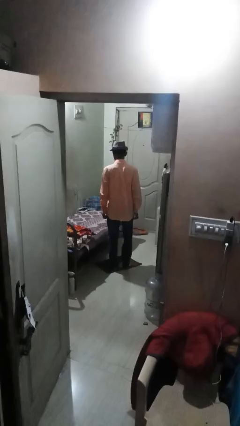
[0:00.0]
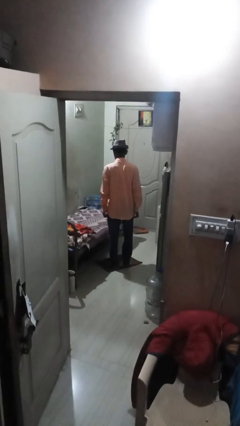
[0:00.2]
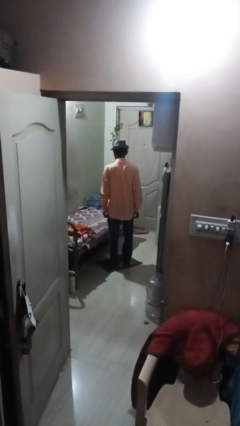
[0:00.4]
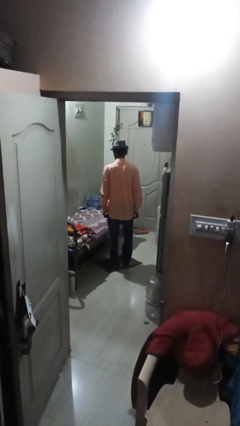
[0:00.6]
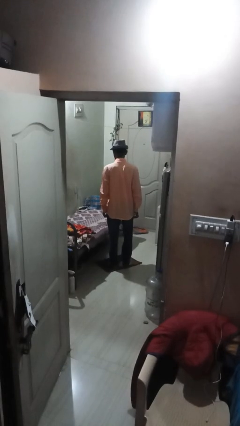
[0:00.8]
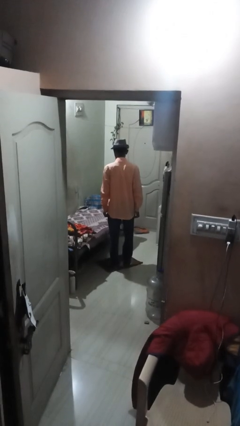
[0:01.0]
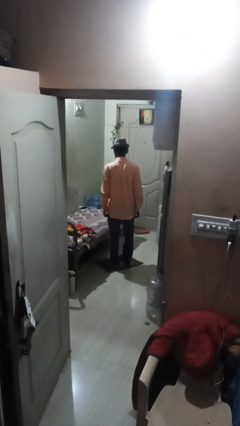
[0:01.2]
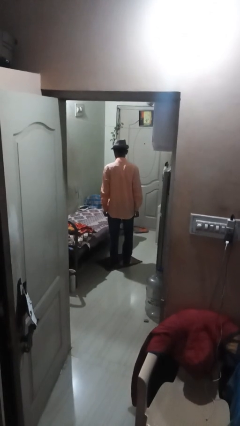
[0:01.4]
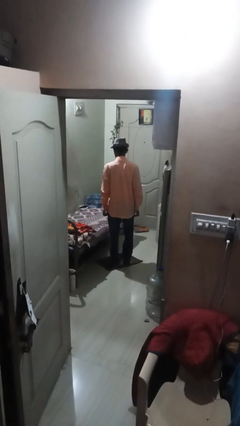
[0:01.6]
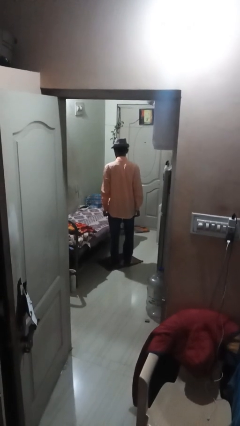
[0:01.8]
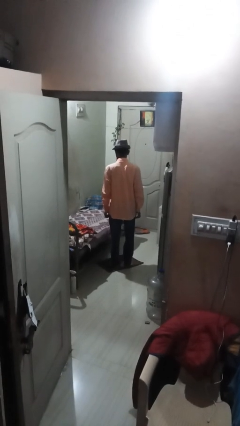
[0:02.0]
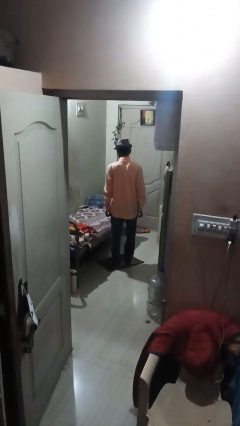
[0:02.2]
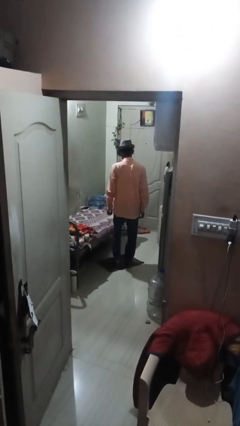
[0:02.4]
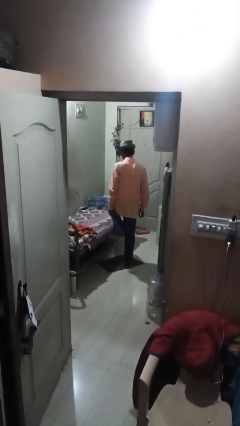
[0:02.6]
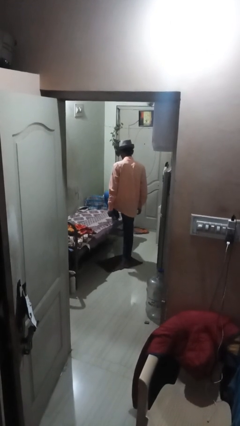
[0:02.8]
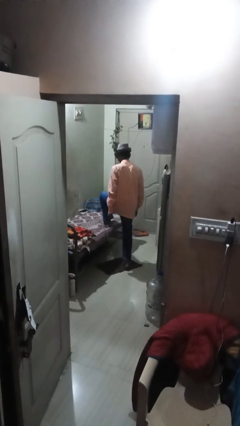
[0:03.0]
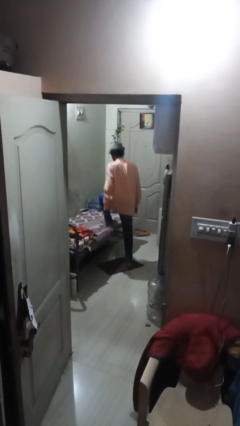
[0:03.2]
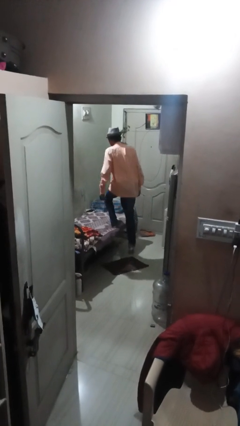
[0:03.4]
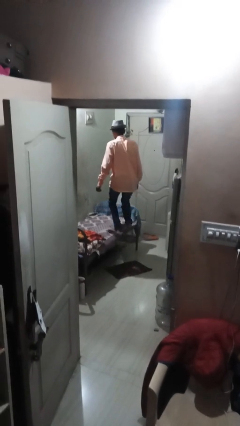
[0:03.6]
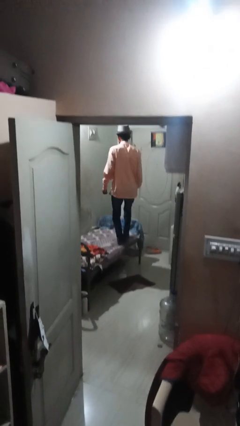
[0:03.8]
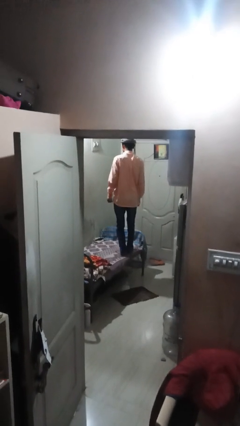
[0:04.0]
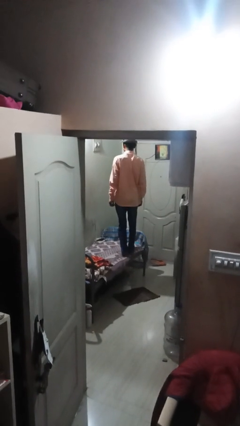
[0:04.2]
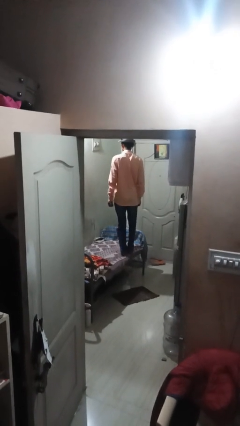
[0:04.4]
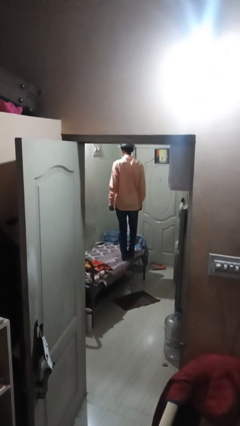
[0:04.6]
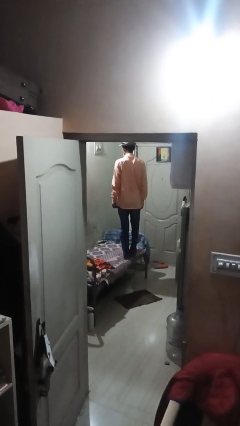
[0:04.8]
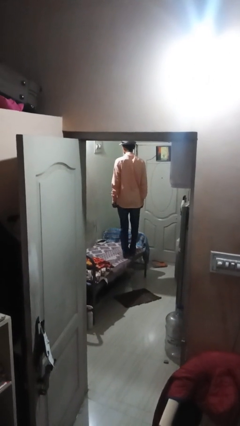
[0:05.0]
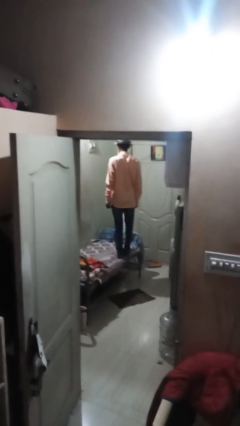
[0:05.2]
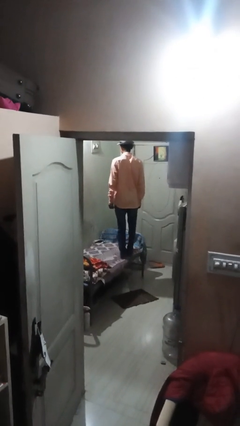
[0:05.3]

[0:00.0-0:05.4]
person climbs on couch

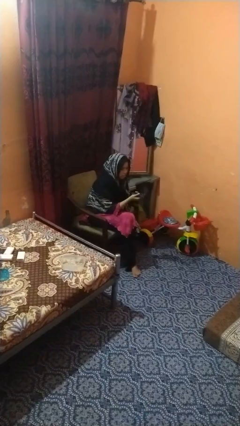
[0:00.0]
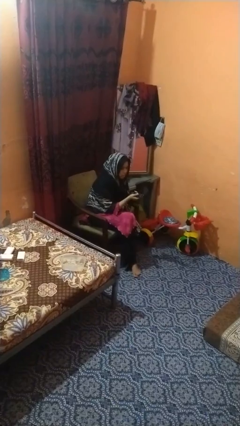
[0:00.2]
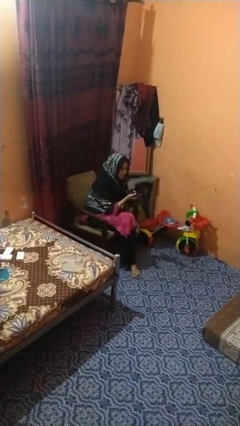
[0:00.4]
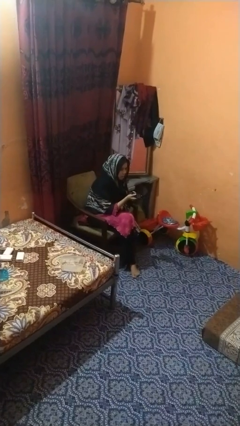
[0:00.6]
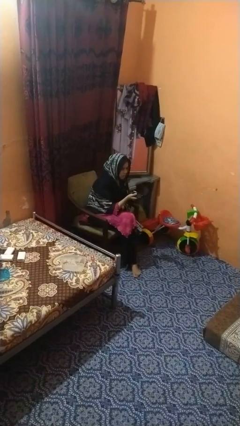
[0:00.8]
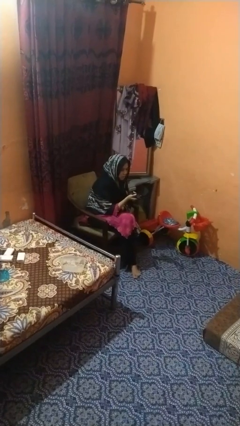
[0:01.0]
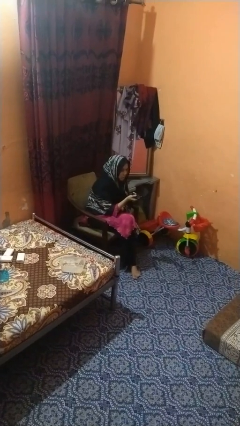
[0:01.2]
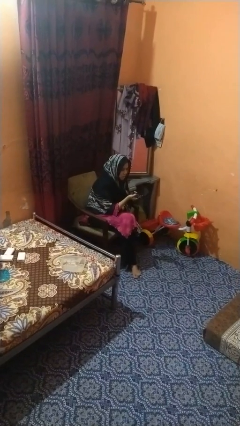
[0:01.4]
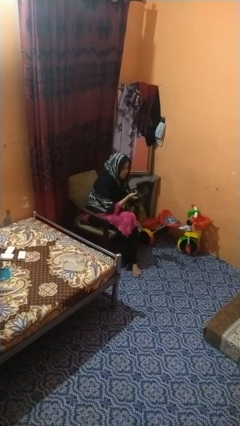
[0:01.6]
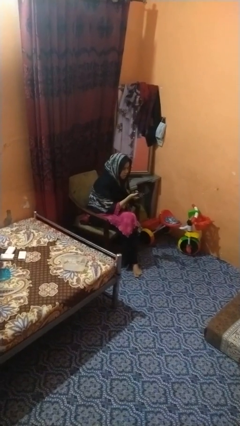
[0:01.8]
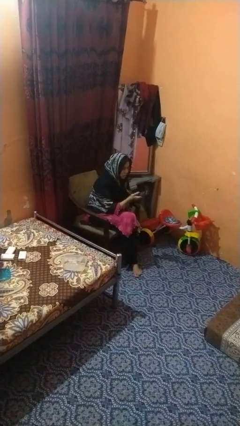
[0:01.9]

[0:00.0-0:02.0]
person uses television remote

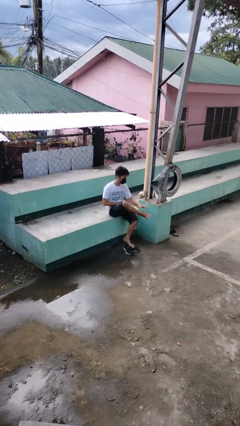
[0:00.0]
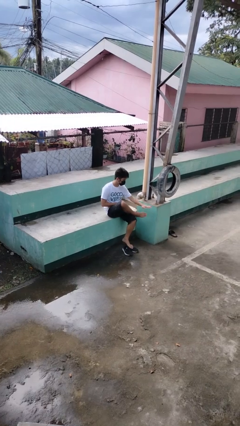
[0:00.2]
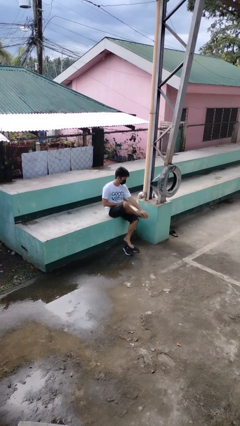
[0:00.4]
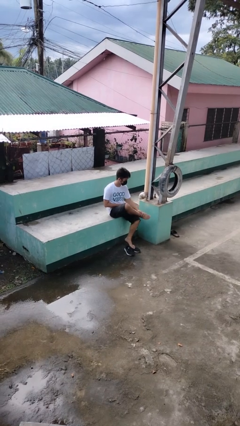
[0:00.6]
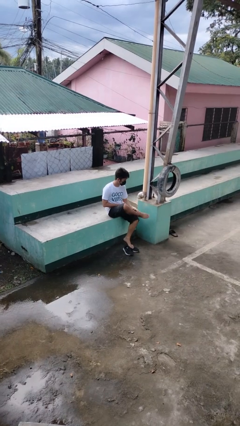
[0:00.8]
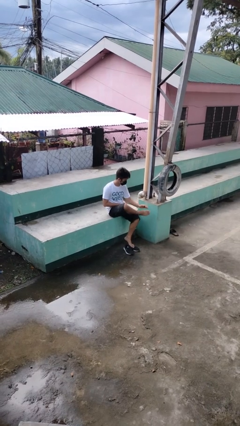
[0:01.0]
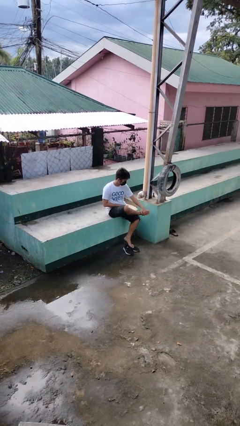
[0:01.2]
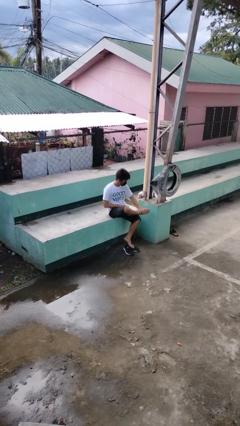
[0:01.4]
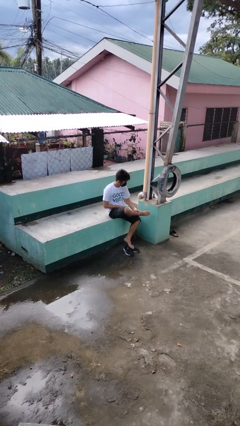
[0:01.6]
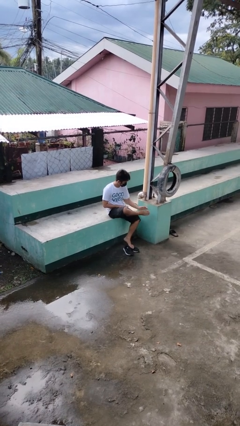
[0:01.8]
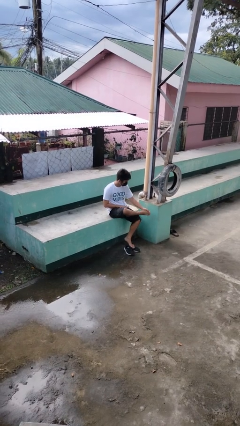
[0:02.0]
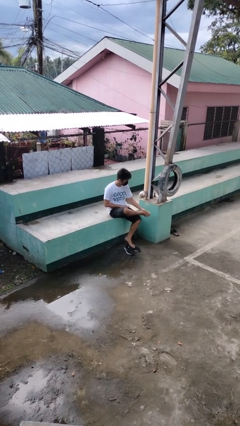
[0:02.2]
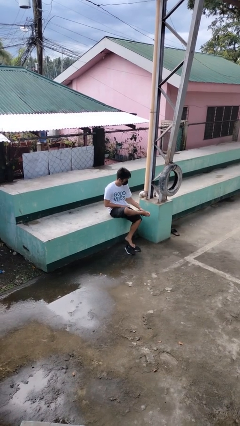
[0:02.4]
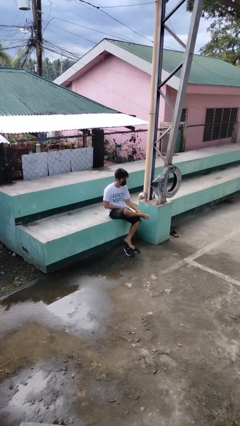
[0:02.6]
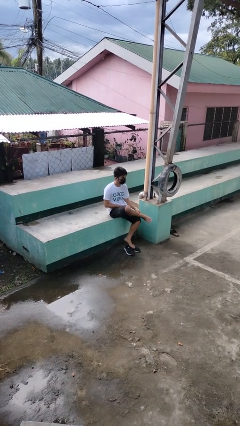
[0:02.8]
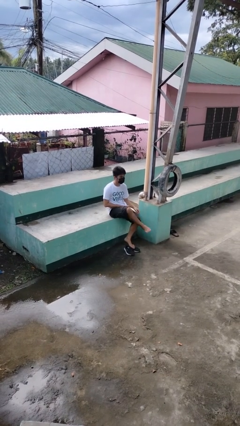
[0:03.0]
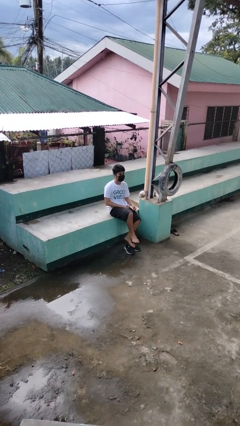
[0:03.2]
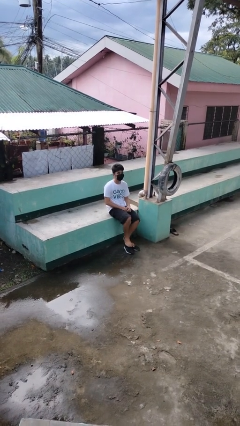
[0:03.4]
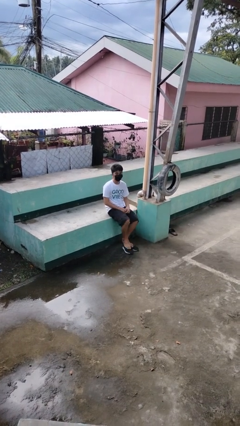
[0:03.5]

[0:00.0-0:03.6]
person rubs foot

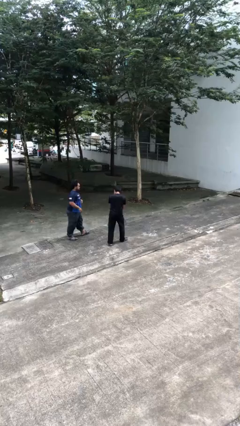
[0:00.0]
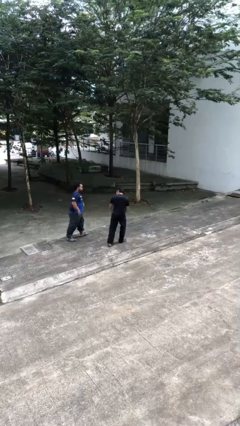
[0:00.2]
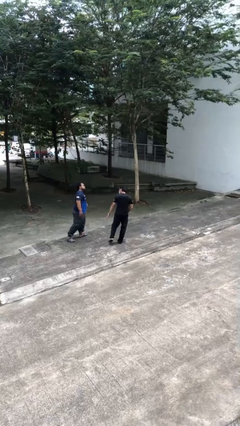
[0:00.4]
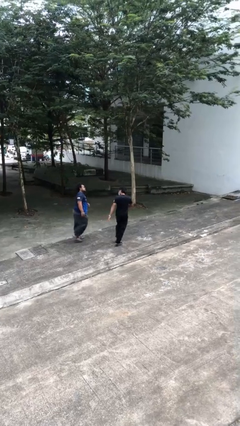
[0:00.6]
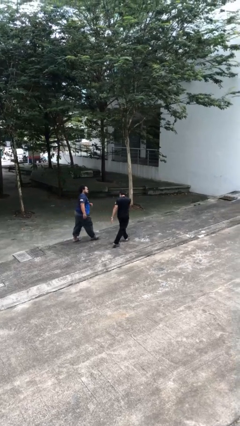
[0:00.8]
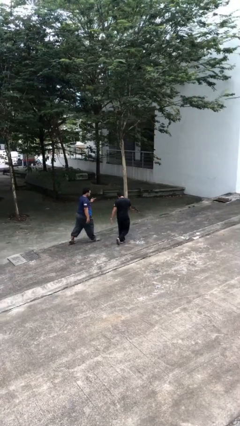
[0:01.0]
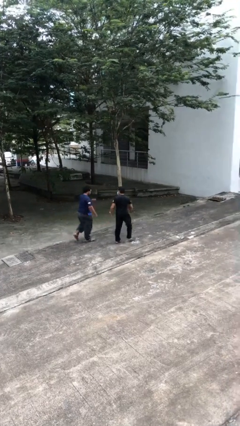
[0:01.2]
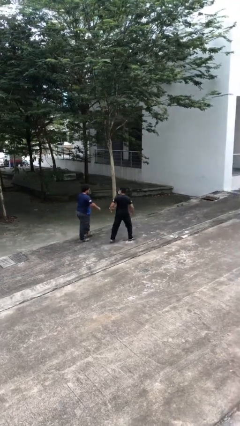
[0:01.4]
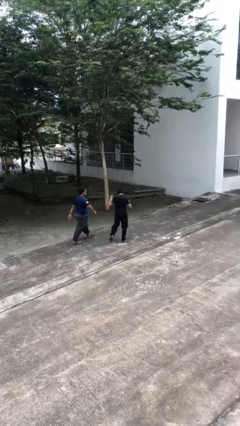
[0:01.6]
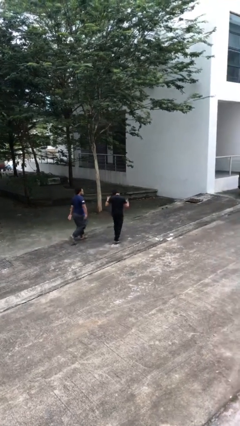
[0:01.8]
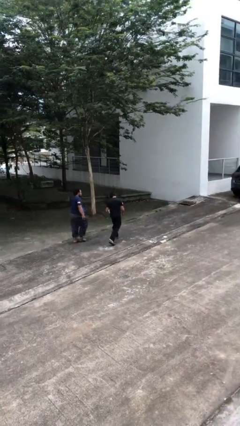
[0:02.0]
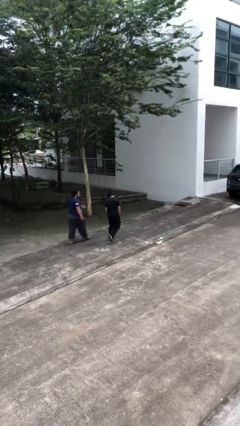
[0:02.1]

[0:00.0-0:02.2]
person talks to person

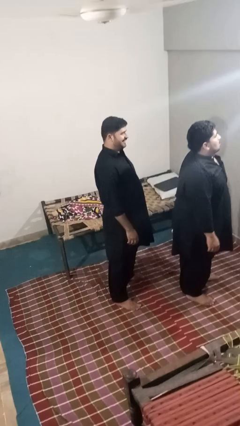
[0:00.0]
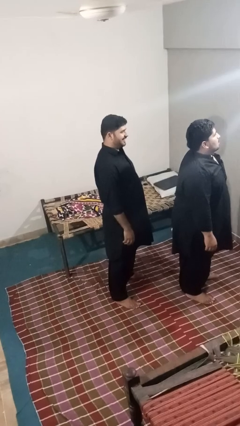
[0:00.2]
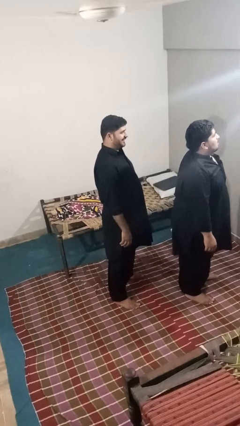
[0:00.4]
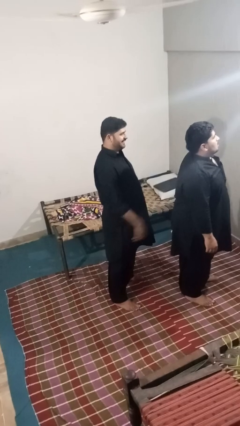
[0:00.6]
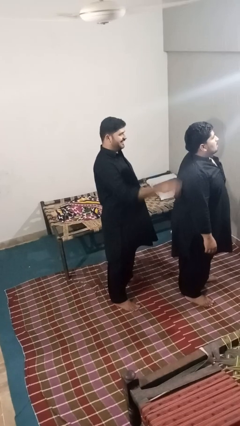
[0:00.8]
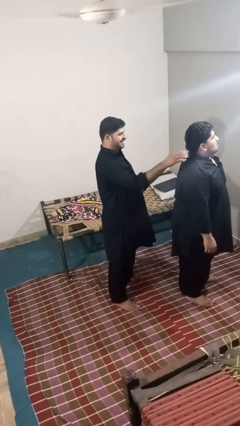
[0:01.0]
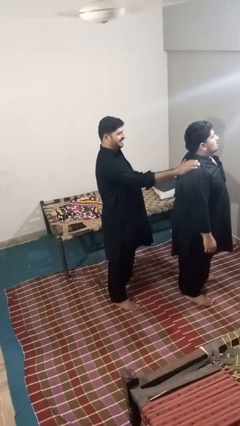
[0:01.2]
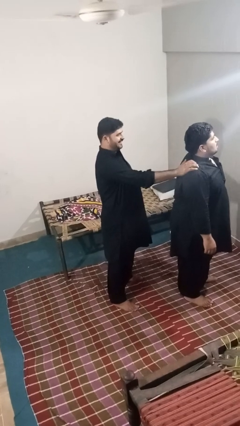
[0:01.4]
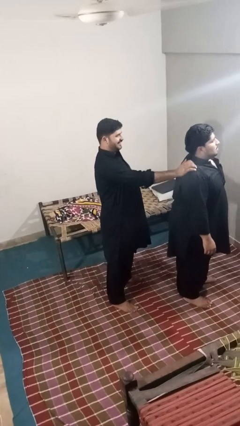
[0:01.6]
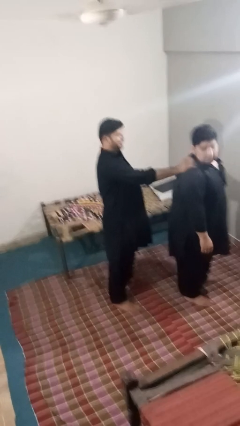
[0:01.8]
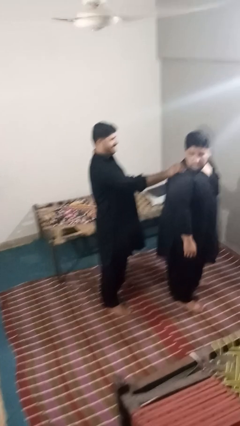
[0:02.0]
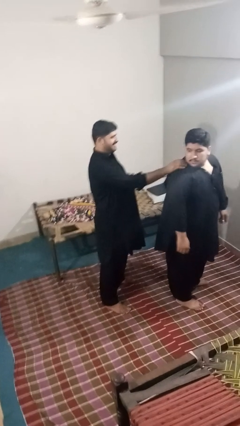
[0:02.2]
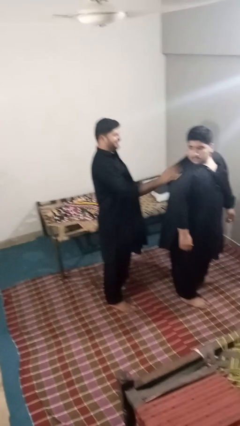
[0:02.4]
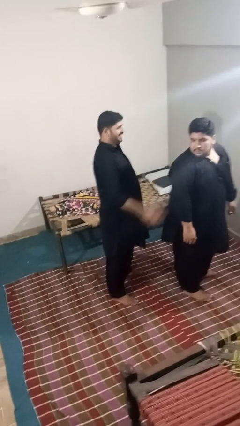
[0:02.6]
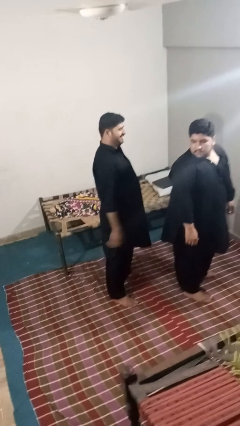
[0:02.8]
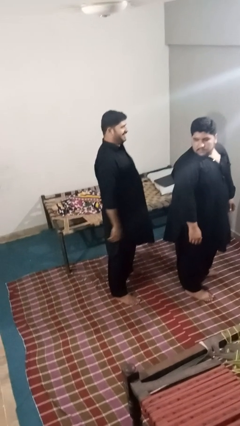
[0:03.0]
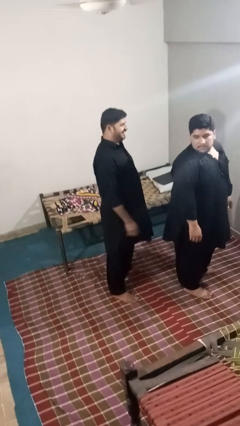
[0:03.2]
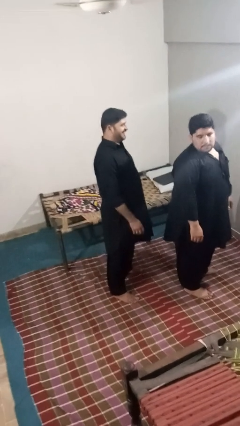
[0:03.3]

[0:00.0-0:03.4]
person touches back of person

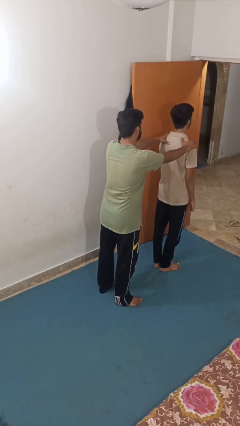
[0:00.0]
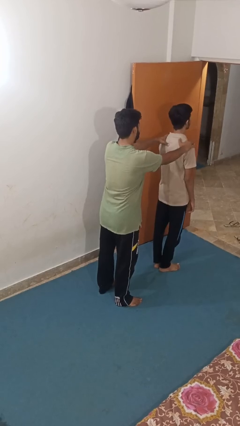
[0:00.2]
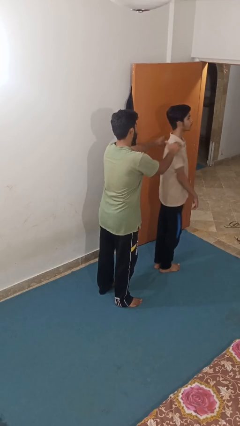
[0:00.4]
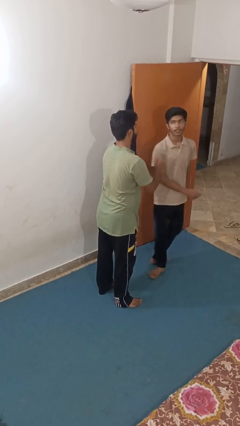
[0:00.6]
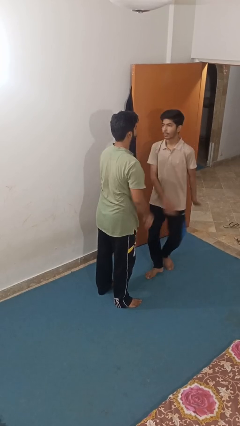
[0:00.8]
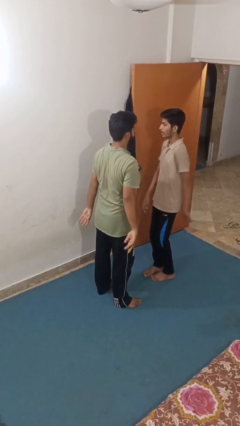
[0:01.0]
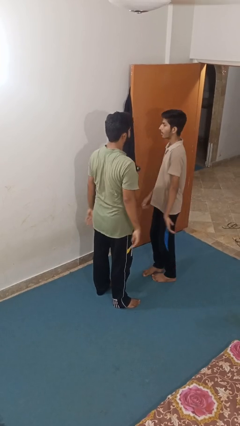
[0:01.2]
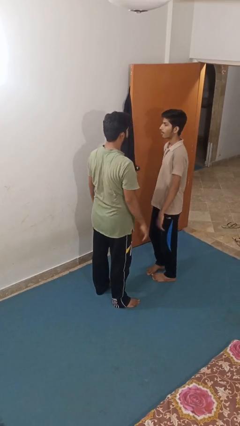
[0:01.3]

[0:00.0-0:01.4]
person spins person around
